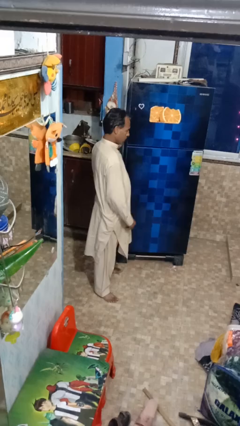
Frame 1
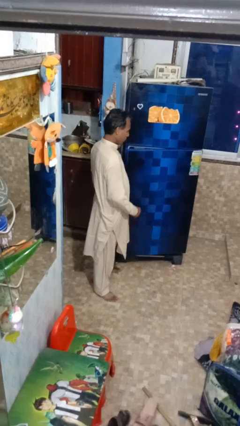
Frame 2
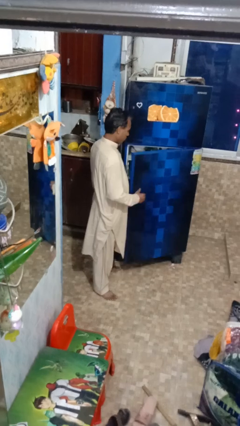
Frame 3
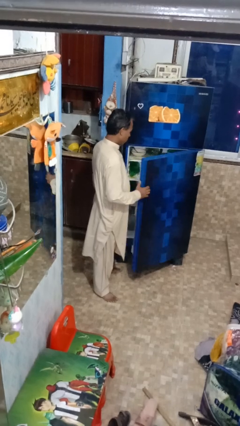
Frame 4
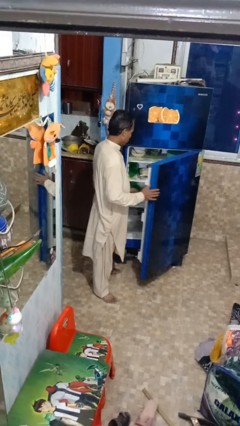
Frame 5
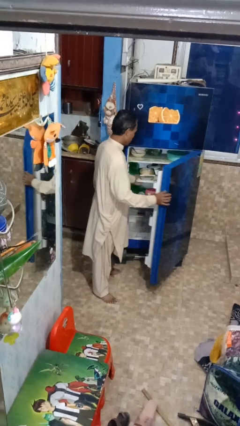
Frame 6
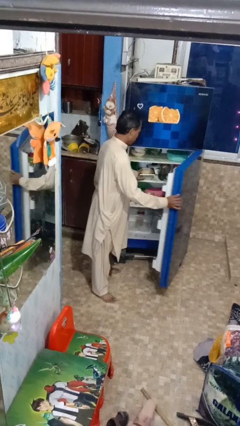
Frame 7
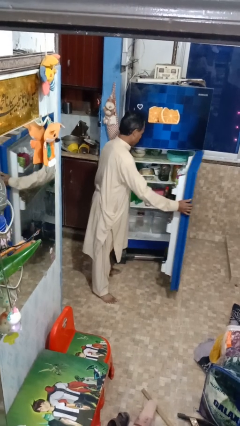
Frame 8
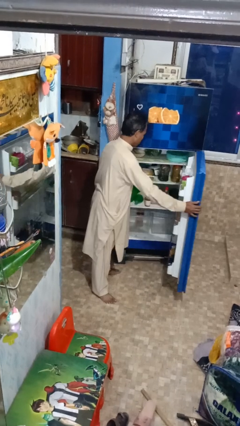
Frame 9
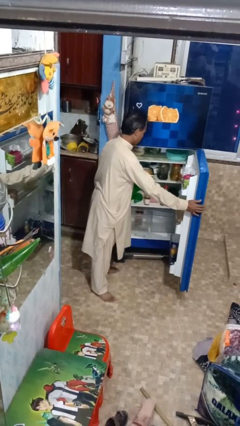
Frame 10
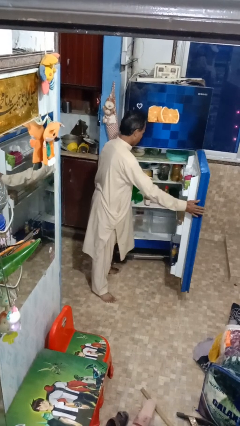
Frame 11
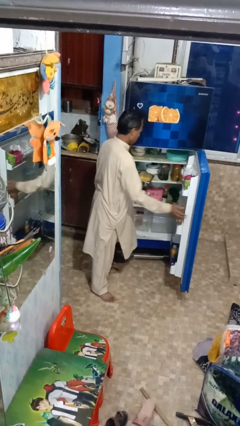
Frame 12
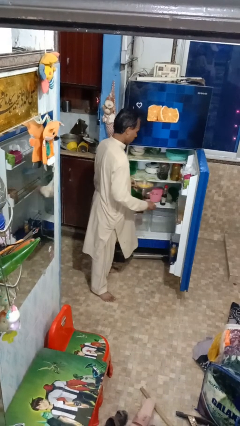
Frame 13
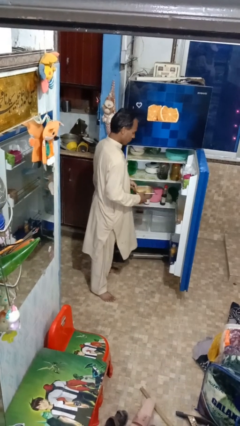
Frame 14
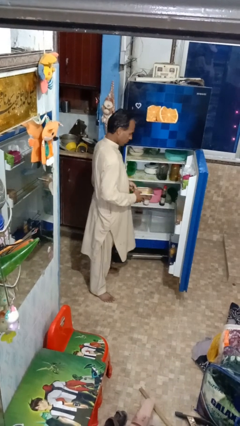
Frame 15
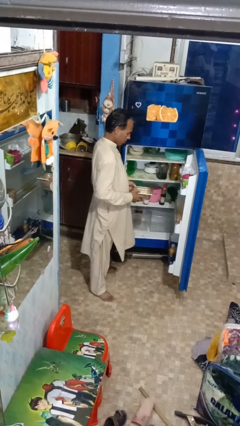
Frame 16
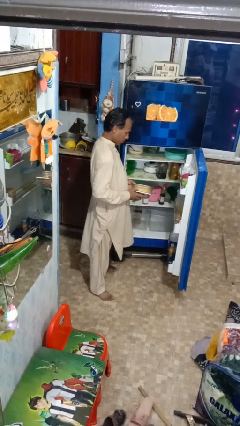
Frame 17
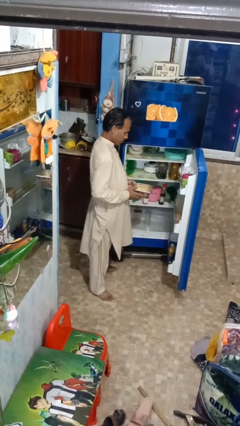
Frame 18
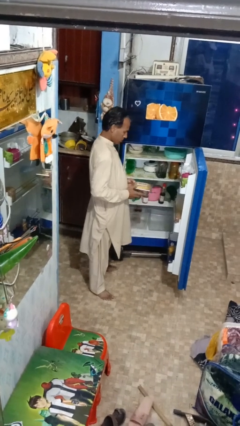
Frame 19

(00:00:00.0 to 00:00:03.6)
person puts object into refrigerator

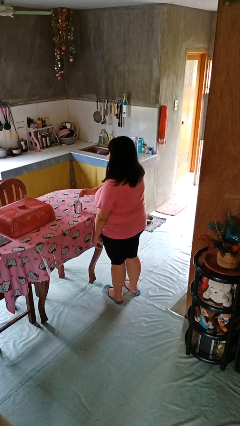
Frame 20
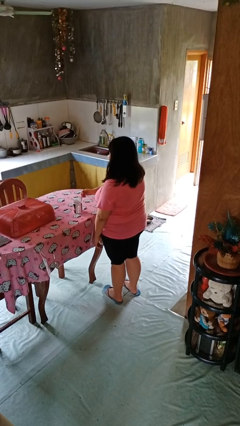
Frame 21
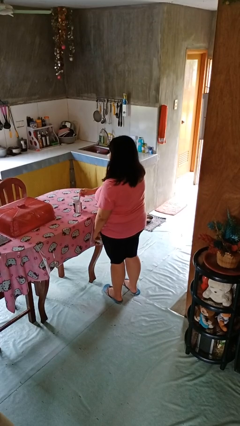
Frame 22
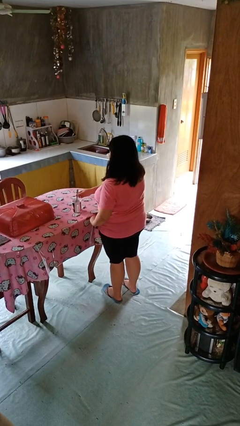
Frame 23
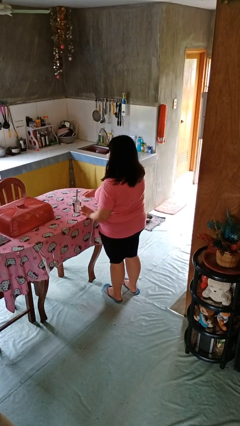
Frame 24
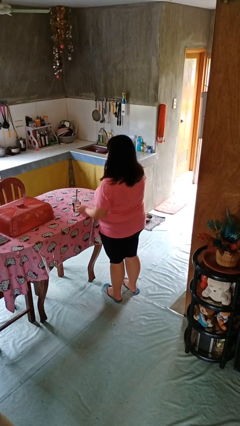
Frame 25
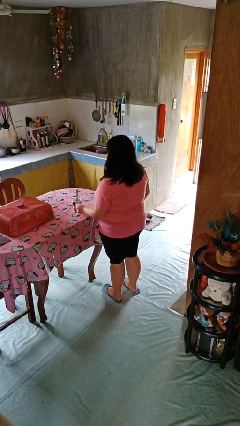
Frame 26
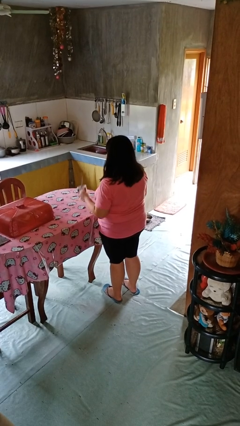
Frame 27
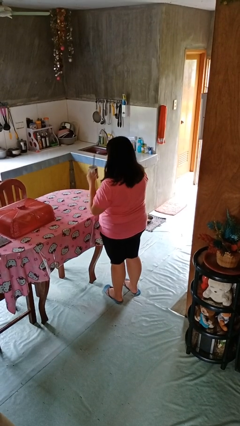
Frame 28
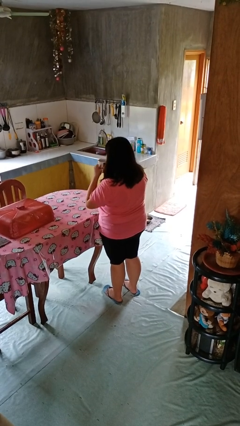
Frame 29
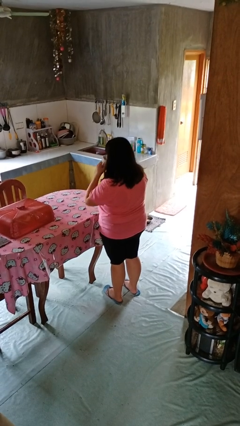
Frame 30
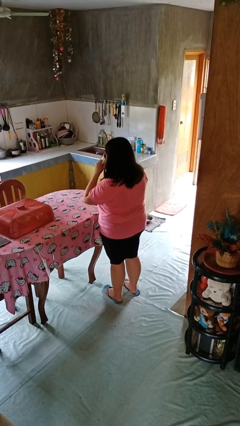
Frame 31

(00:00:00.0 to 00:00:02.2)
person stirs mug

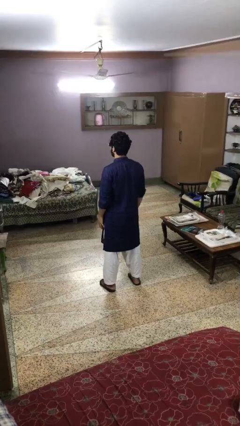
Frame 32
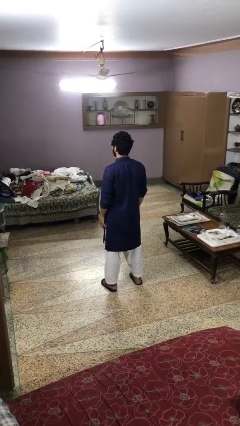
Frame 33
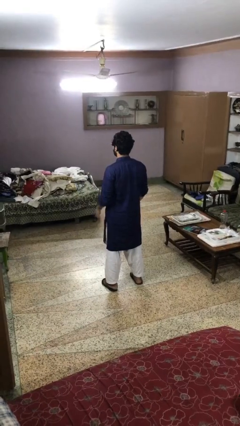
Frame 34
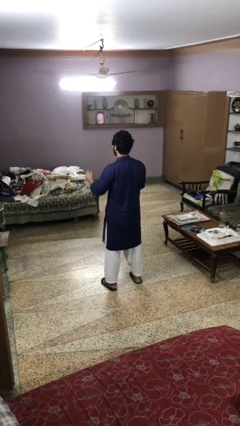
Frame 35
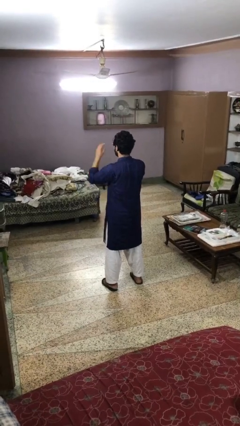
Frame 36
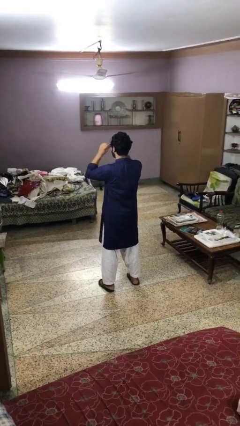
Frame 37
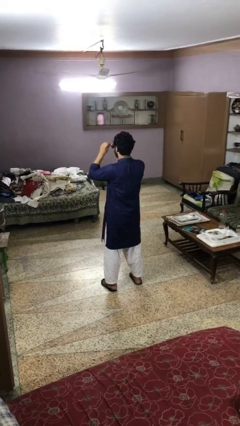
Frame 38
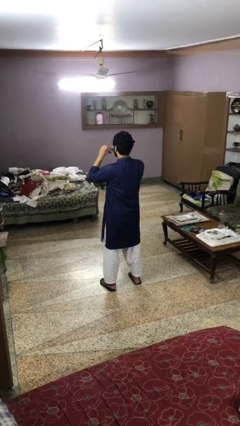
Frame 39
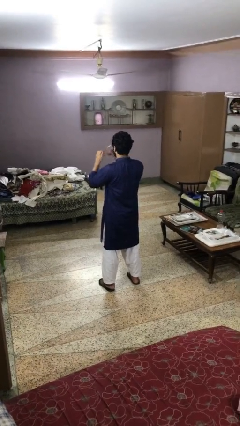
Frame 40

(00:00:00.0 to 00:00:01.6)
person takes off sunglasses

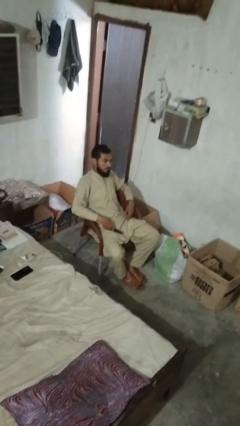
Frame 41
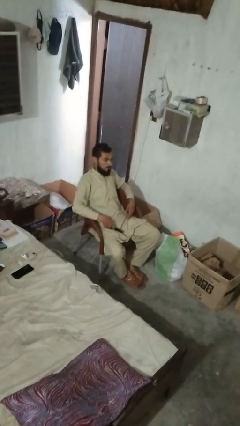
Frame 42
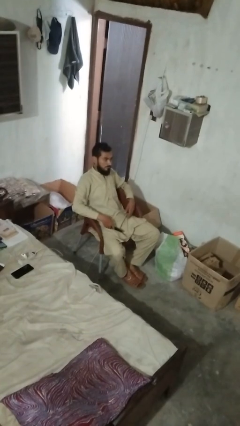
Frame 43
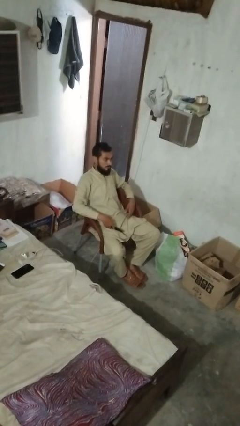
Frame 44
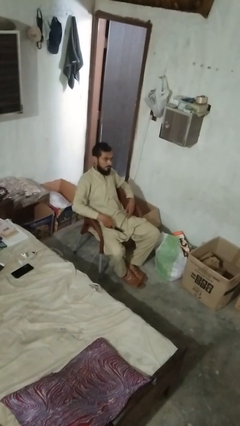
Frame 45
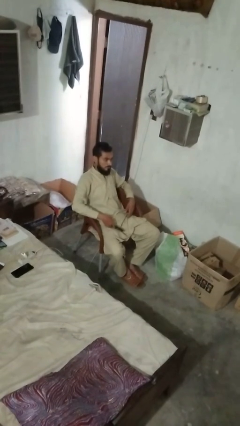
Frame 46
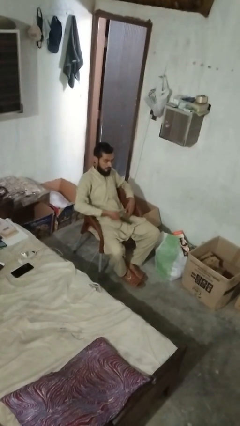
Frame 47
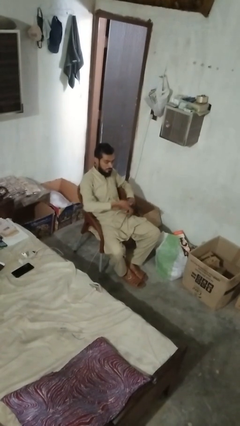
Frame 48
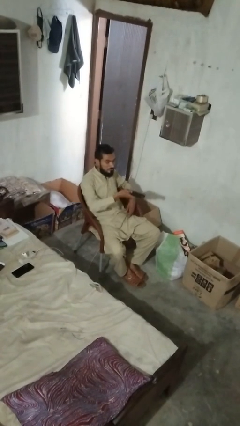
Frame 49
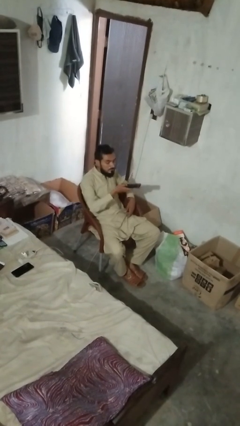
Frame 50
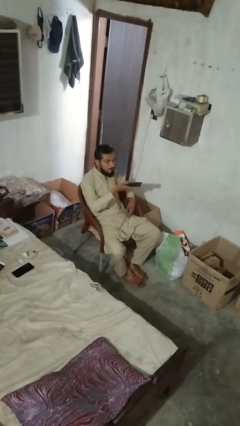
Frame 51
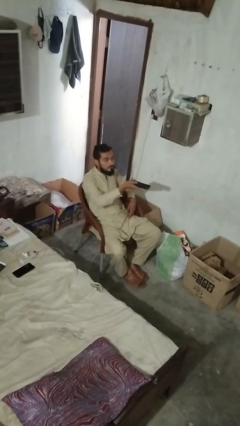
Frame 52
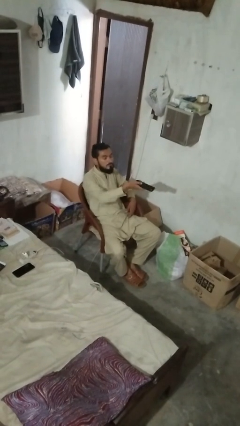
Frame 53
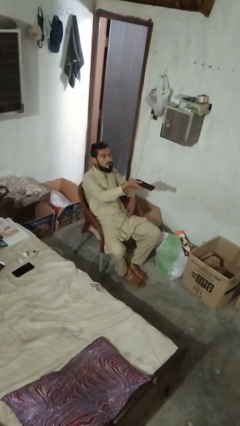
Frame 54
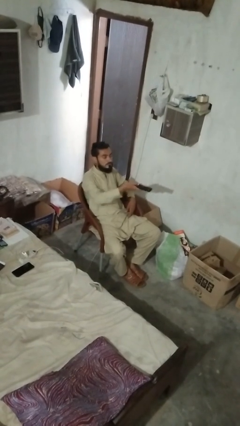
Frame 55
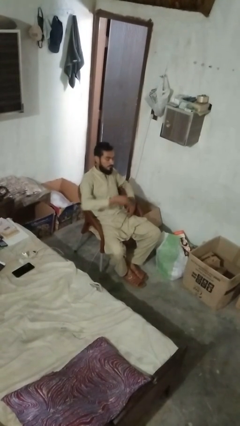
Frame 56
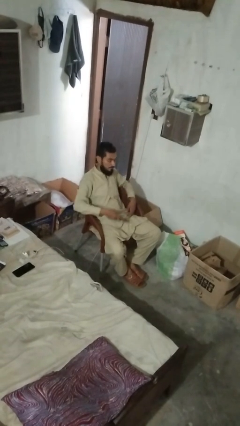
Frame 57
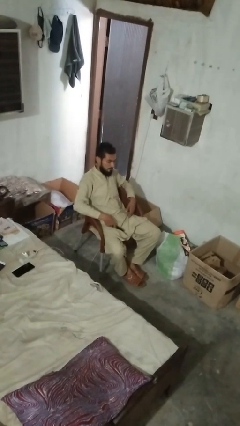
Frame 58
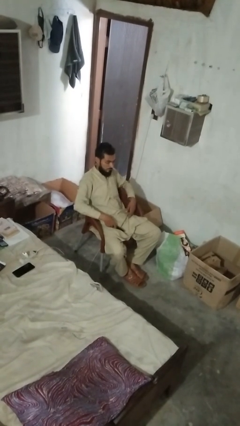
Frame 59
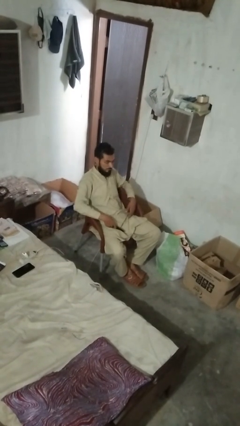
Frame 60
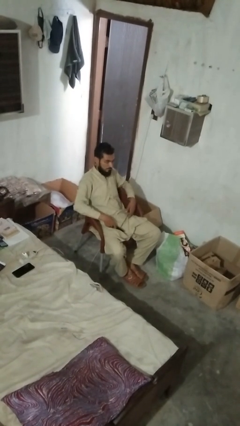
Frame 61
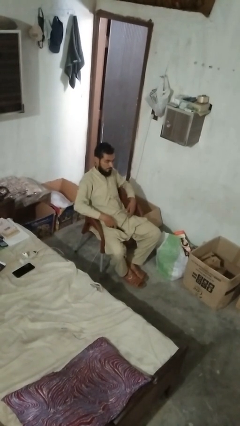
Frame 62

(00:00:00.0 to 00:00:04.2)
person uses television remote

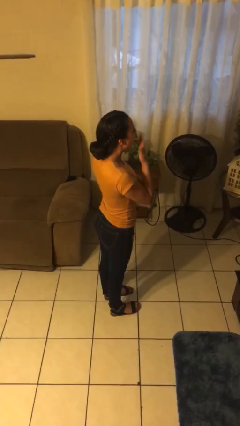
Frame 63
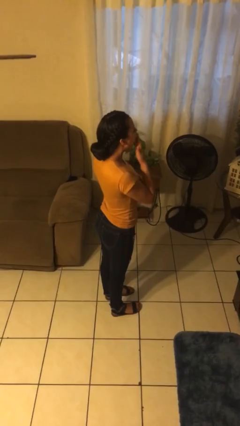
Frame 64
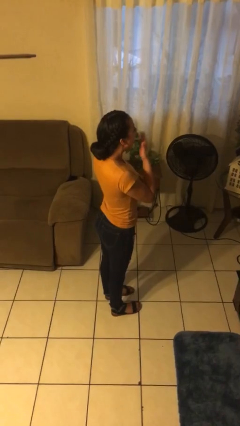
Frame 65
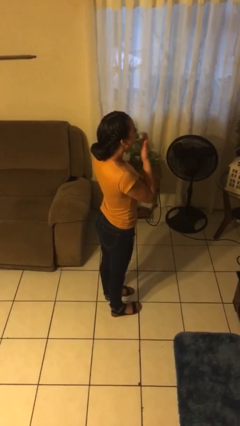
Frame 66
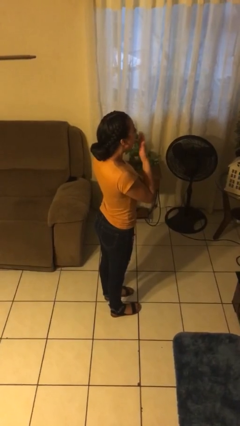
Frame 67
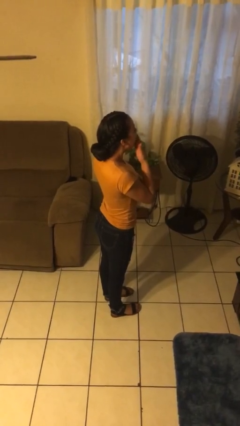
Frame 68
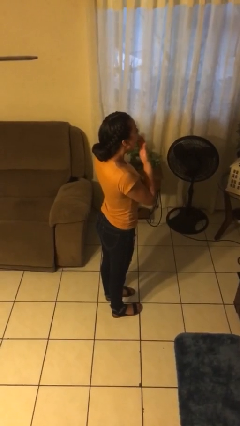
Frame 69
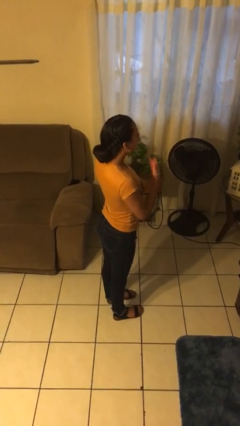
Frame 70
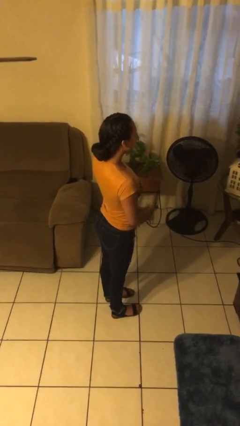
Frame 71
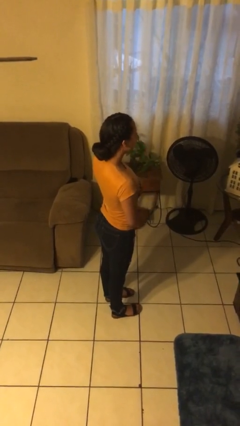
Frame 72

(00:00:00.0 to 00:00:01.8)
person yawns

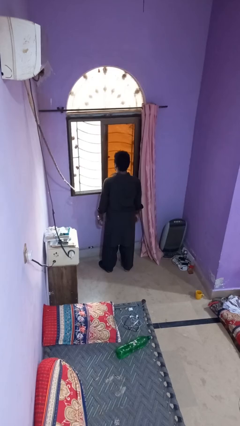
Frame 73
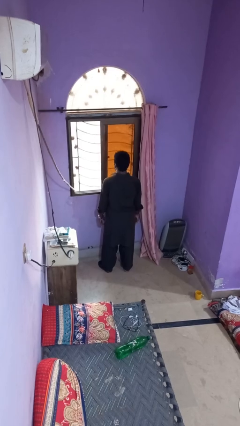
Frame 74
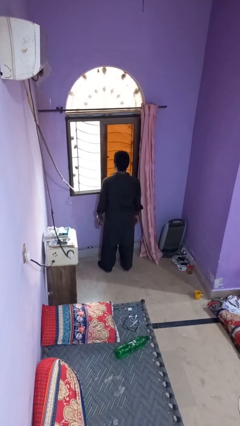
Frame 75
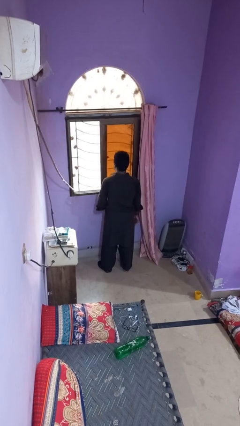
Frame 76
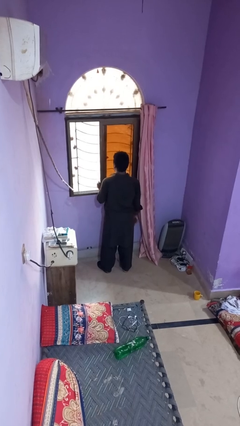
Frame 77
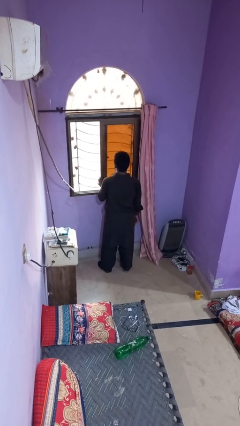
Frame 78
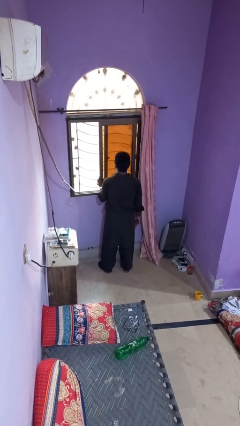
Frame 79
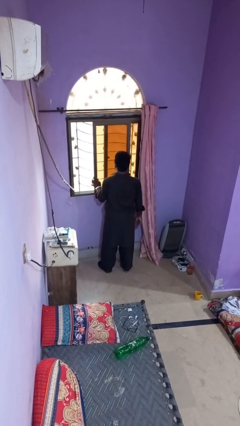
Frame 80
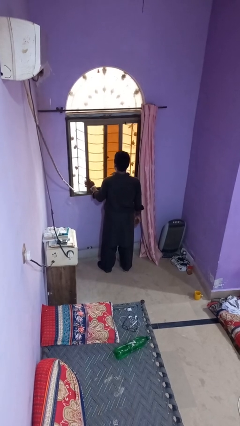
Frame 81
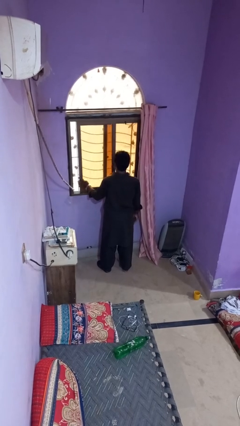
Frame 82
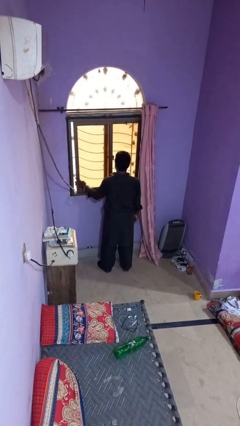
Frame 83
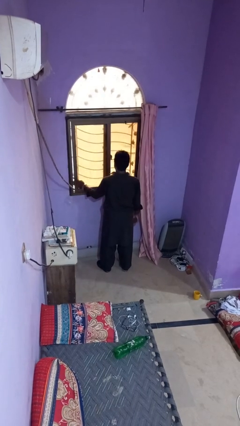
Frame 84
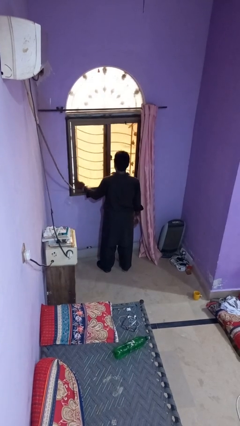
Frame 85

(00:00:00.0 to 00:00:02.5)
person closes home window

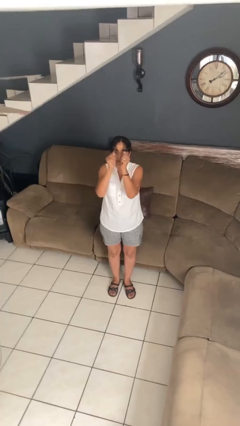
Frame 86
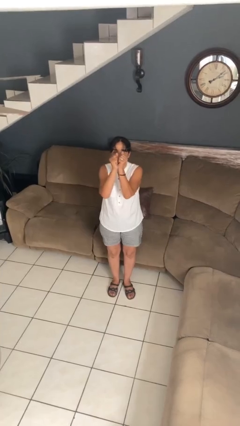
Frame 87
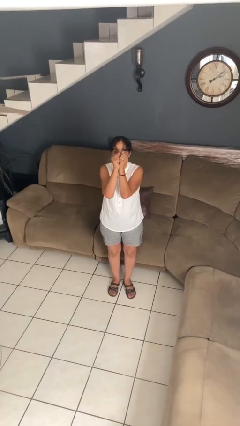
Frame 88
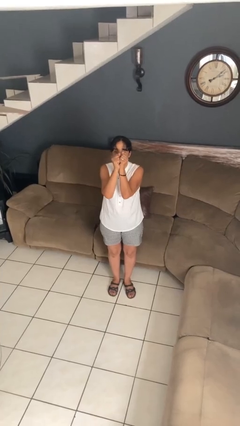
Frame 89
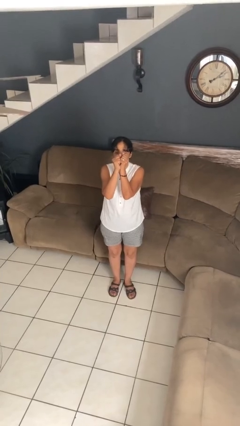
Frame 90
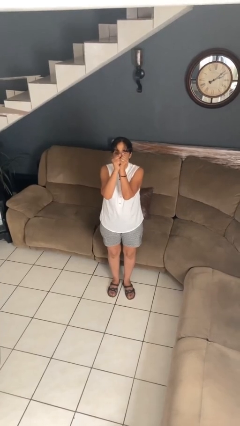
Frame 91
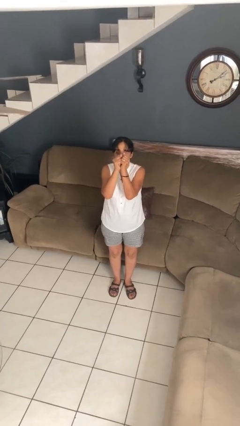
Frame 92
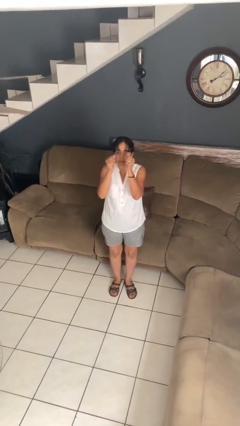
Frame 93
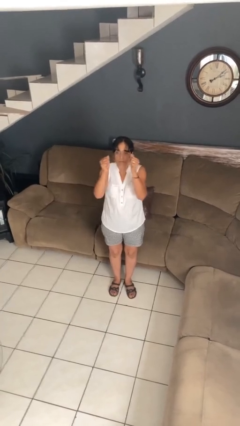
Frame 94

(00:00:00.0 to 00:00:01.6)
person gestures zoom out
